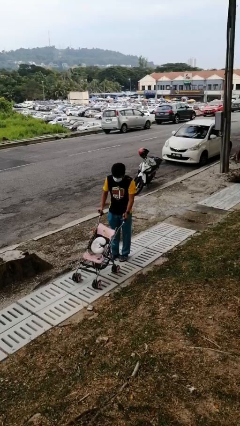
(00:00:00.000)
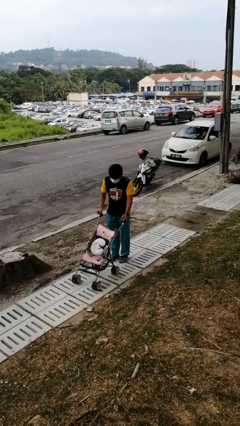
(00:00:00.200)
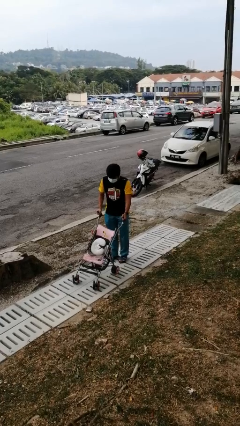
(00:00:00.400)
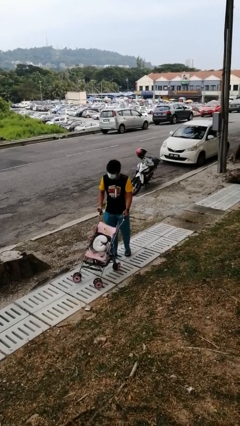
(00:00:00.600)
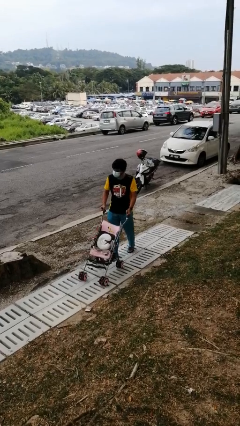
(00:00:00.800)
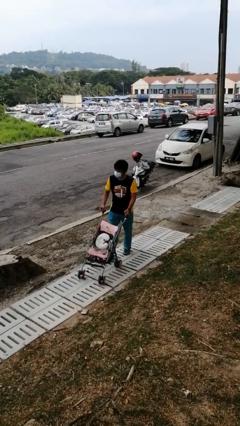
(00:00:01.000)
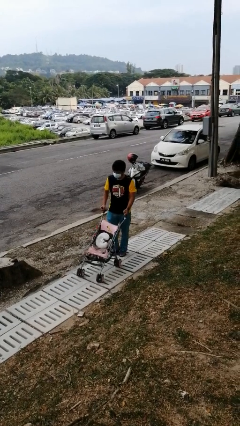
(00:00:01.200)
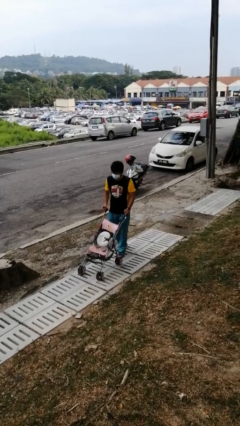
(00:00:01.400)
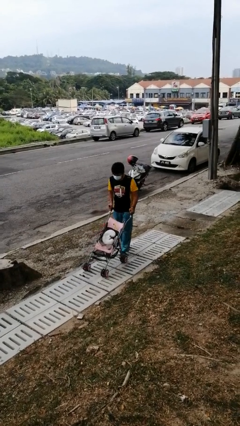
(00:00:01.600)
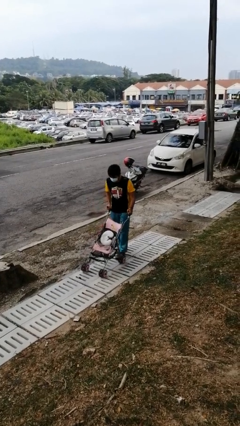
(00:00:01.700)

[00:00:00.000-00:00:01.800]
person pulls wheeled cart

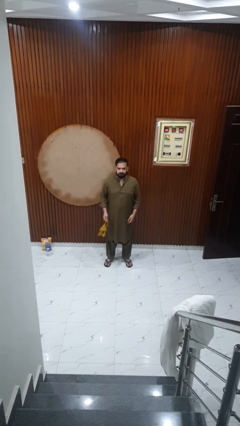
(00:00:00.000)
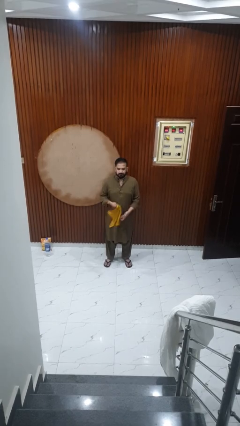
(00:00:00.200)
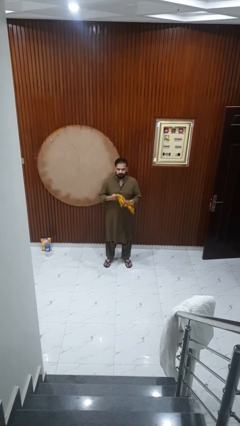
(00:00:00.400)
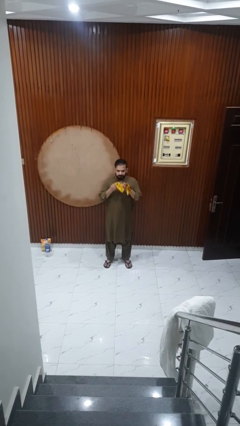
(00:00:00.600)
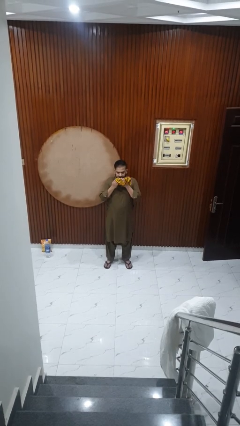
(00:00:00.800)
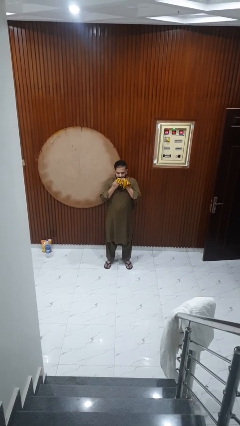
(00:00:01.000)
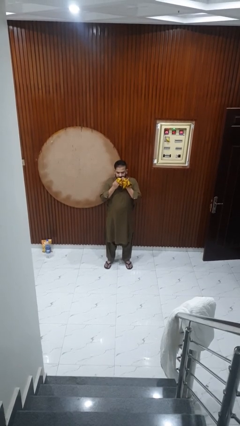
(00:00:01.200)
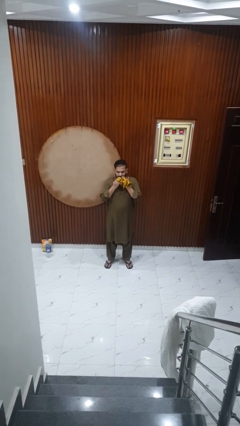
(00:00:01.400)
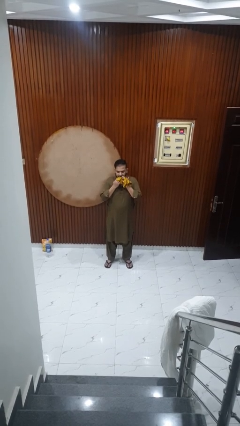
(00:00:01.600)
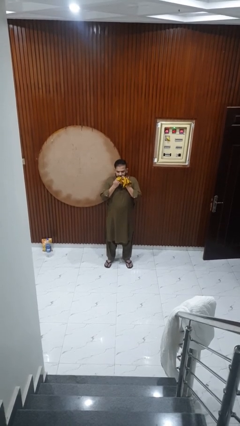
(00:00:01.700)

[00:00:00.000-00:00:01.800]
person wipes mouth with napkin

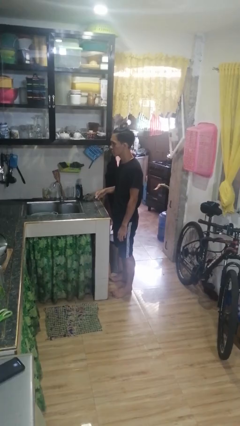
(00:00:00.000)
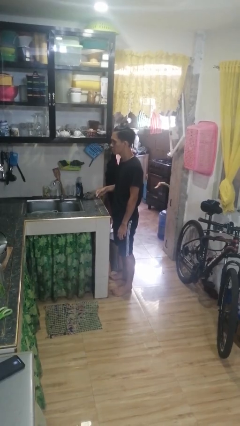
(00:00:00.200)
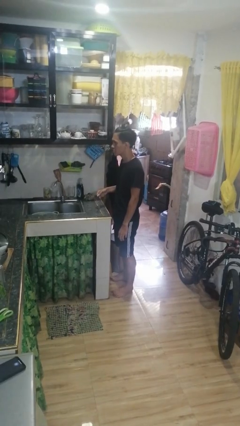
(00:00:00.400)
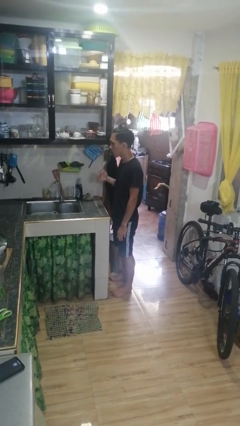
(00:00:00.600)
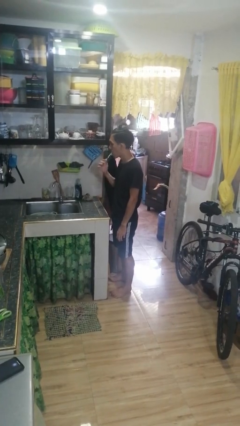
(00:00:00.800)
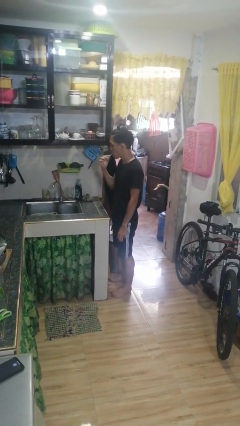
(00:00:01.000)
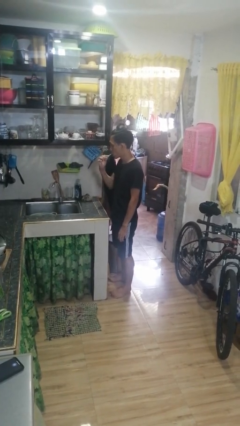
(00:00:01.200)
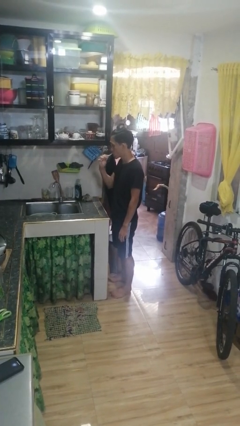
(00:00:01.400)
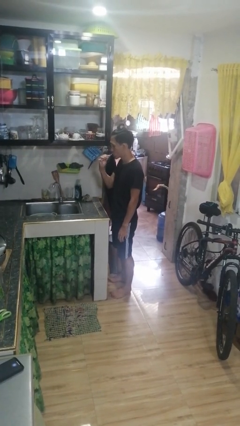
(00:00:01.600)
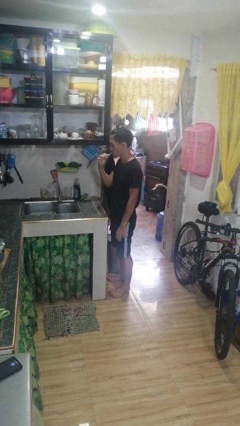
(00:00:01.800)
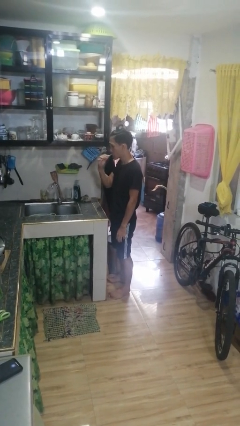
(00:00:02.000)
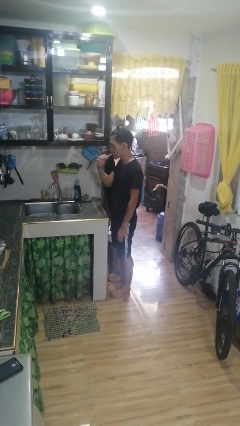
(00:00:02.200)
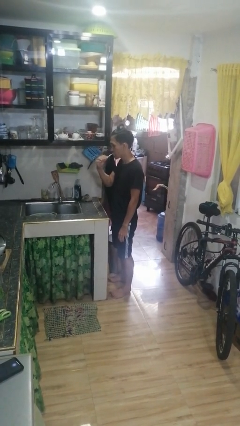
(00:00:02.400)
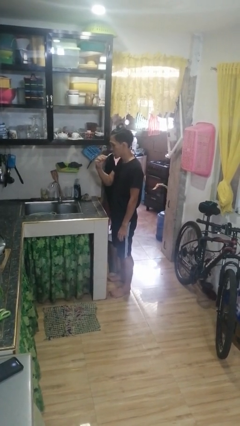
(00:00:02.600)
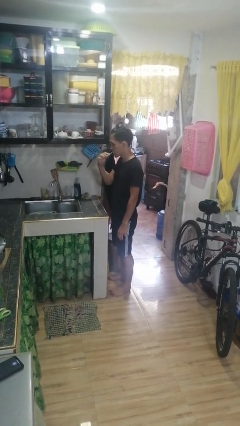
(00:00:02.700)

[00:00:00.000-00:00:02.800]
person brushes teeth

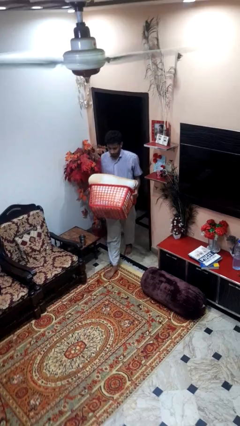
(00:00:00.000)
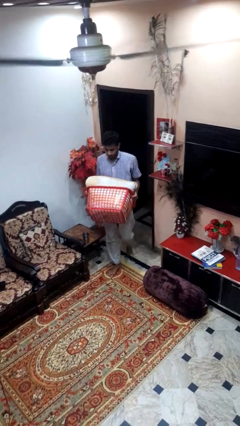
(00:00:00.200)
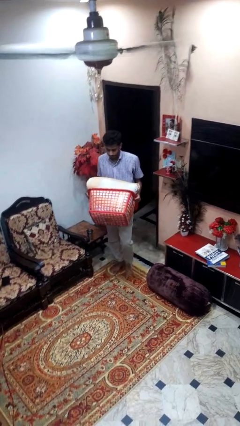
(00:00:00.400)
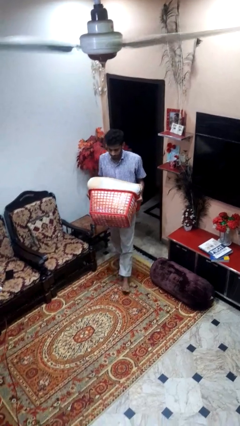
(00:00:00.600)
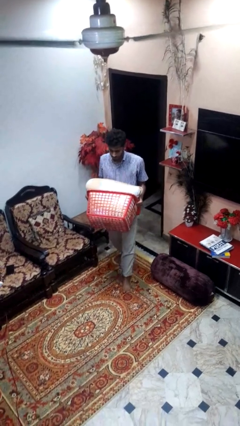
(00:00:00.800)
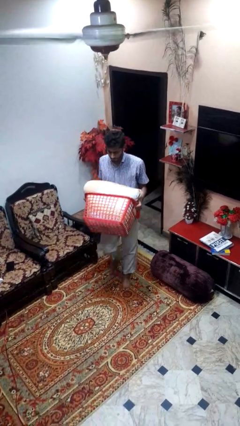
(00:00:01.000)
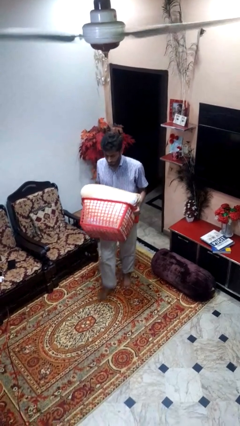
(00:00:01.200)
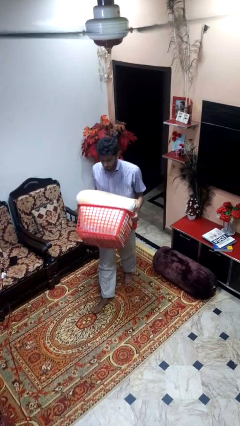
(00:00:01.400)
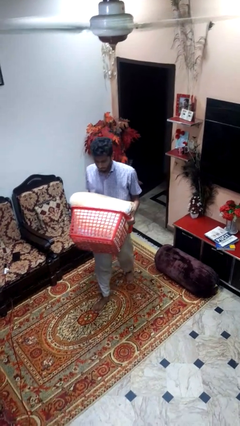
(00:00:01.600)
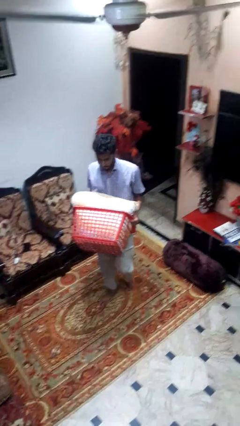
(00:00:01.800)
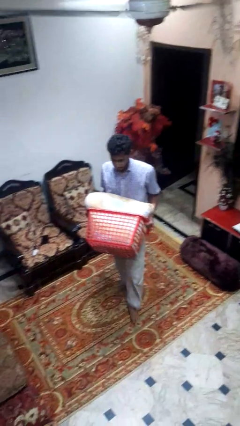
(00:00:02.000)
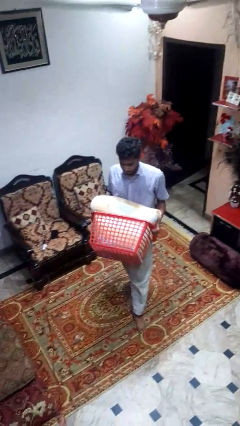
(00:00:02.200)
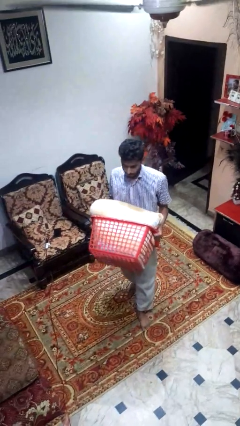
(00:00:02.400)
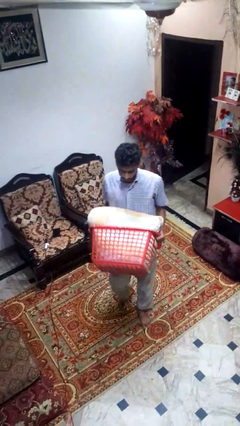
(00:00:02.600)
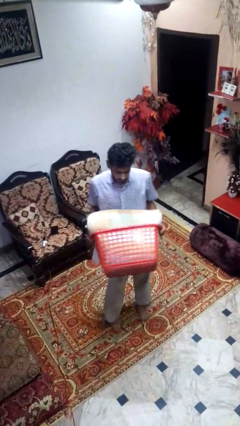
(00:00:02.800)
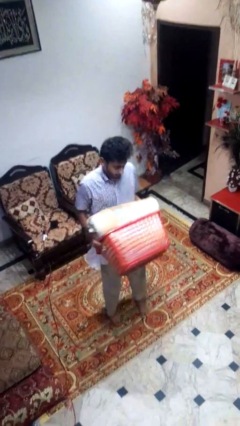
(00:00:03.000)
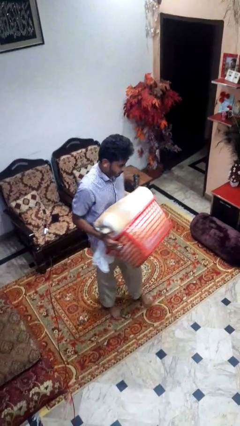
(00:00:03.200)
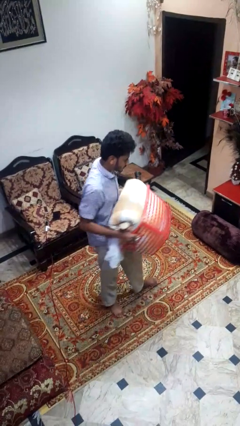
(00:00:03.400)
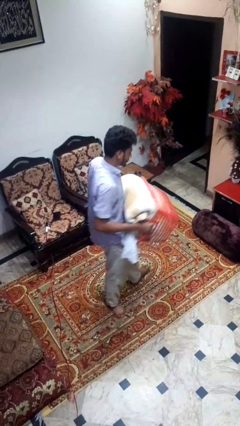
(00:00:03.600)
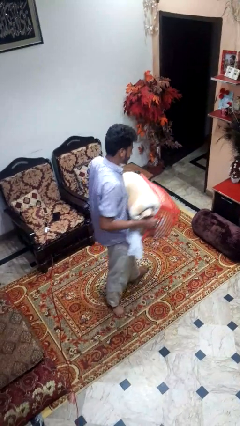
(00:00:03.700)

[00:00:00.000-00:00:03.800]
person carries laundry basket

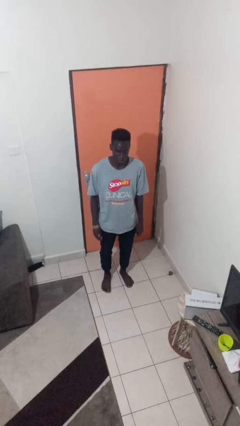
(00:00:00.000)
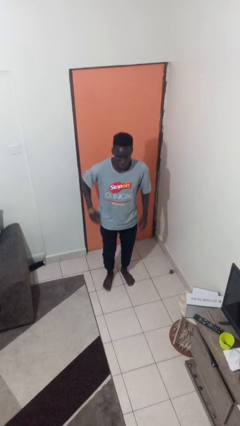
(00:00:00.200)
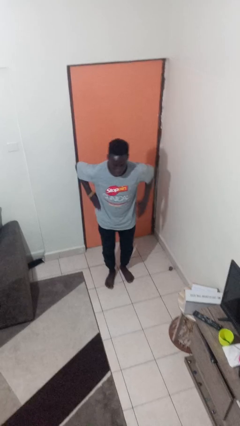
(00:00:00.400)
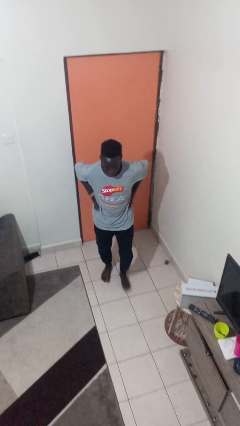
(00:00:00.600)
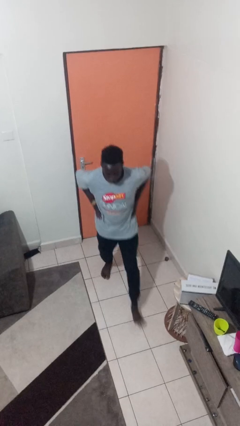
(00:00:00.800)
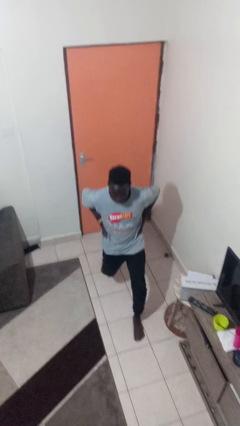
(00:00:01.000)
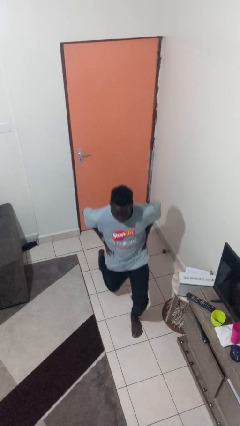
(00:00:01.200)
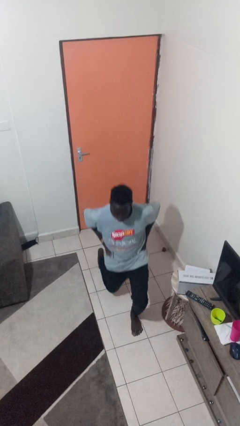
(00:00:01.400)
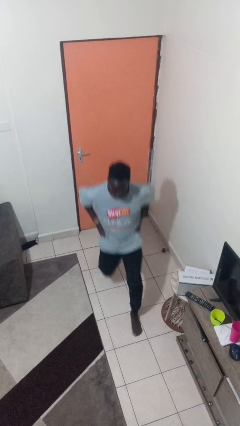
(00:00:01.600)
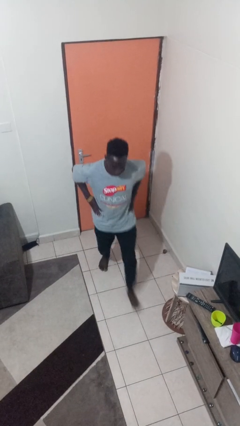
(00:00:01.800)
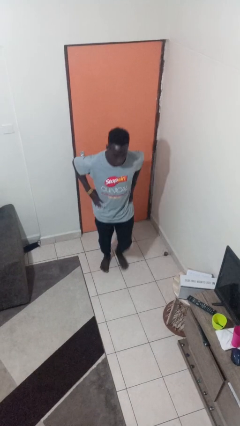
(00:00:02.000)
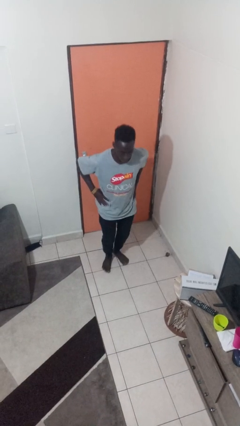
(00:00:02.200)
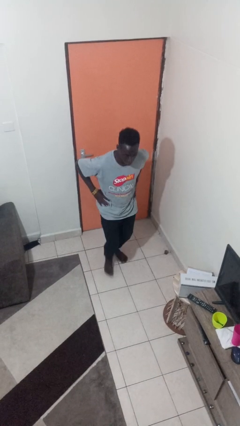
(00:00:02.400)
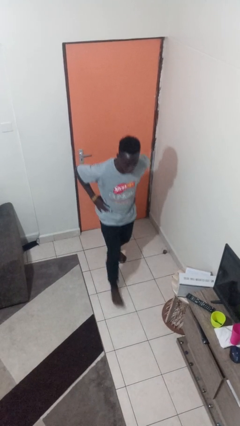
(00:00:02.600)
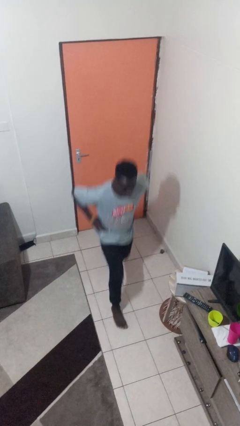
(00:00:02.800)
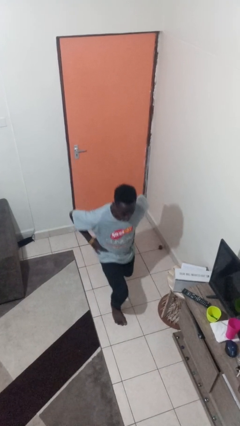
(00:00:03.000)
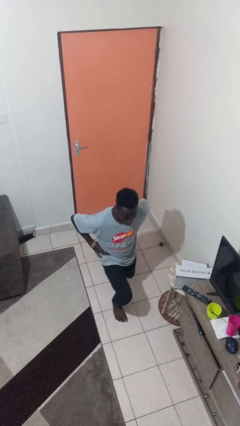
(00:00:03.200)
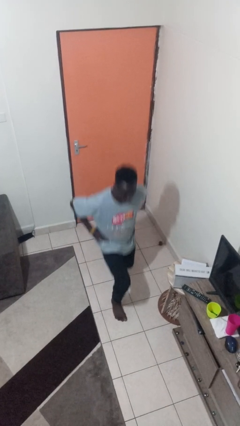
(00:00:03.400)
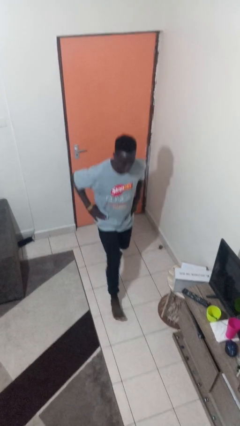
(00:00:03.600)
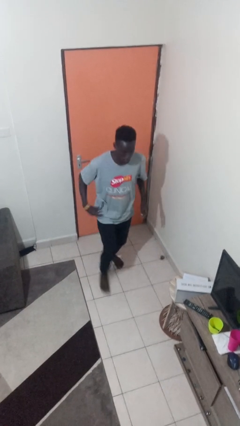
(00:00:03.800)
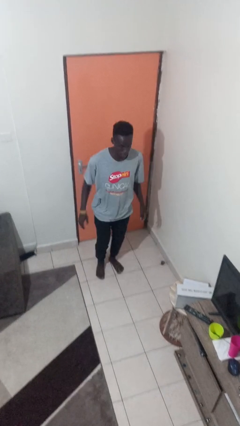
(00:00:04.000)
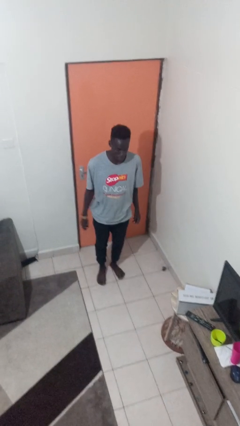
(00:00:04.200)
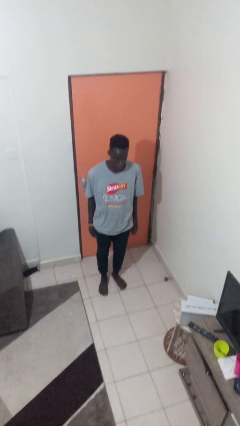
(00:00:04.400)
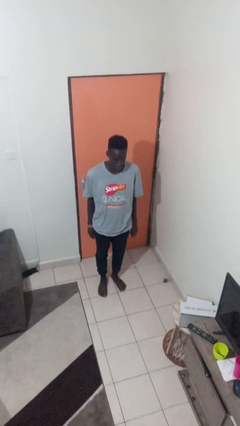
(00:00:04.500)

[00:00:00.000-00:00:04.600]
person exercises with lunges

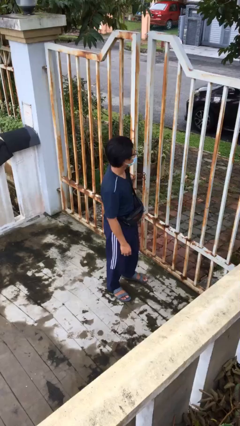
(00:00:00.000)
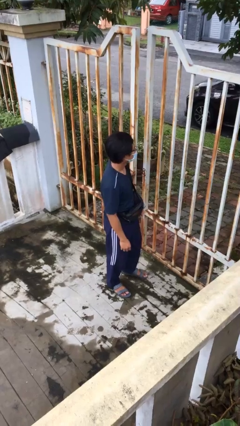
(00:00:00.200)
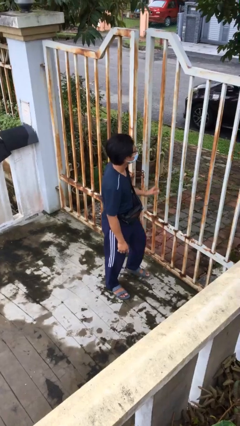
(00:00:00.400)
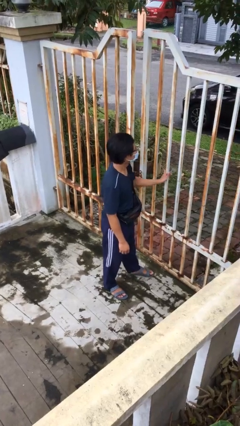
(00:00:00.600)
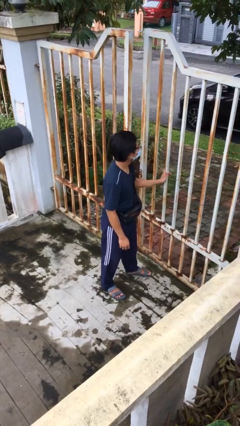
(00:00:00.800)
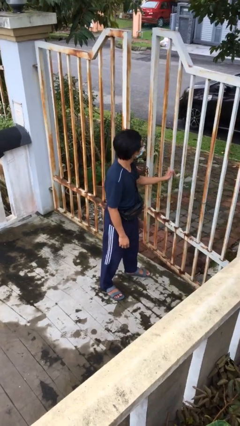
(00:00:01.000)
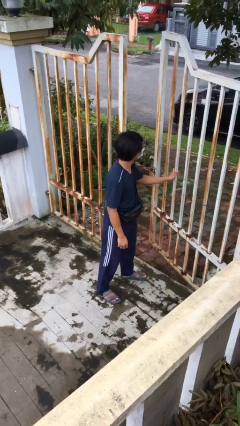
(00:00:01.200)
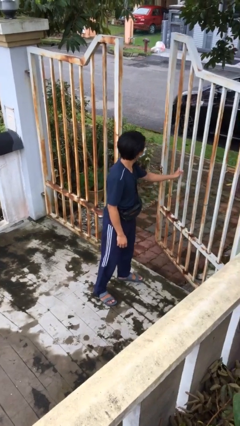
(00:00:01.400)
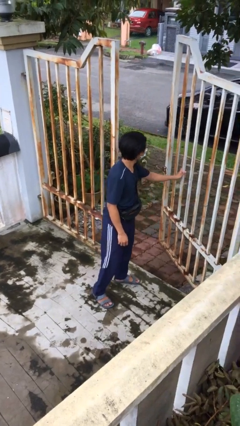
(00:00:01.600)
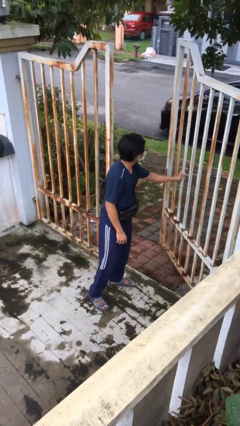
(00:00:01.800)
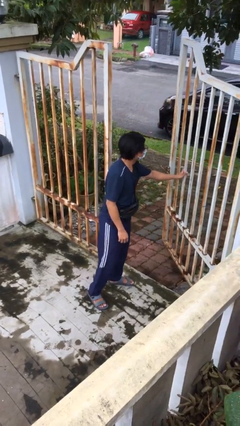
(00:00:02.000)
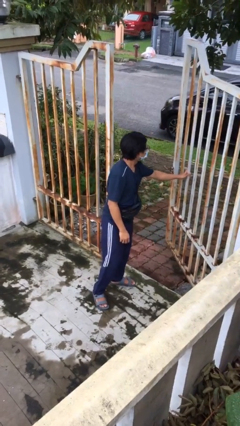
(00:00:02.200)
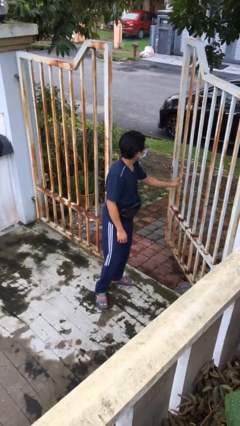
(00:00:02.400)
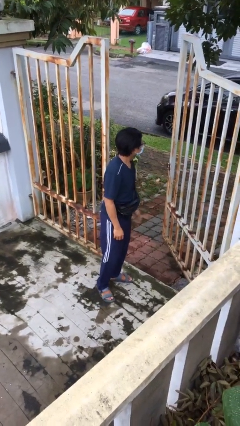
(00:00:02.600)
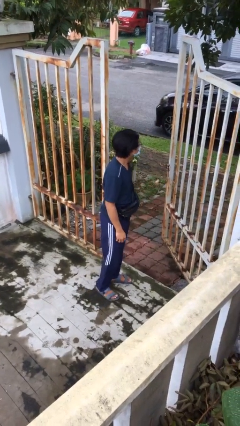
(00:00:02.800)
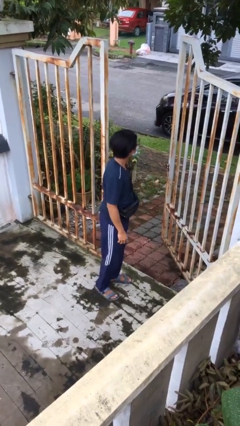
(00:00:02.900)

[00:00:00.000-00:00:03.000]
person opens facility door
